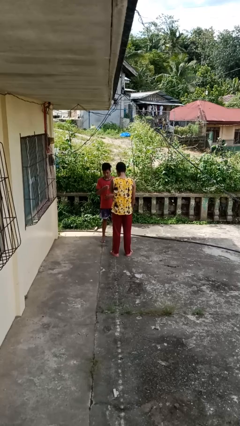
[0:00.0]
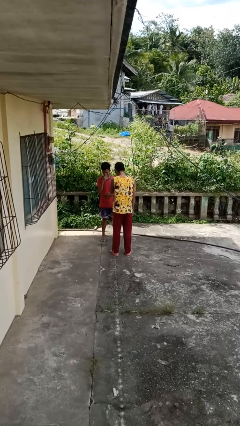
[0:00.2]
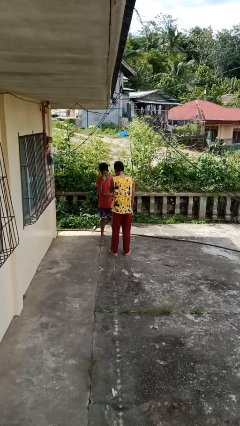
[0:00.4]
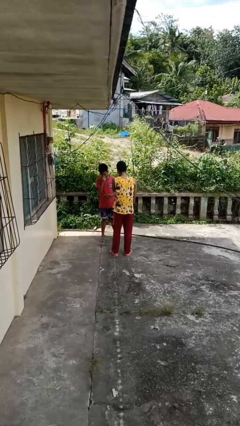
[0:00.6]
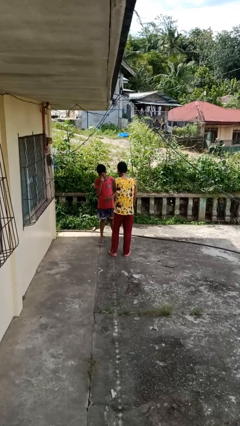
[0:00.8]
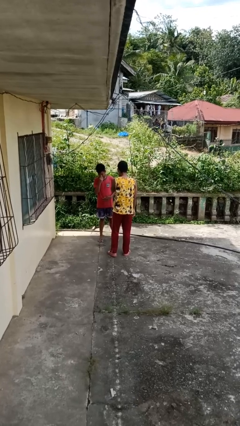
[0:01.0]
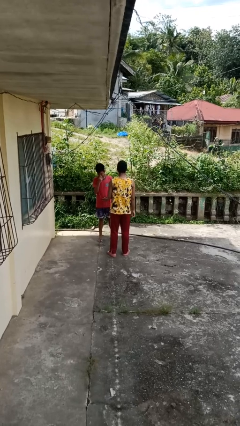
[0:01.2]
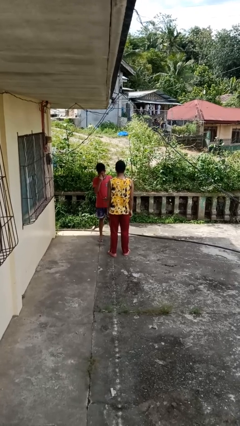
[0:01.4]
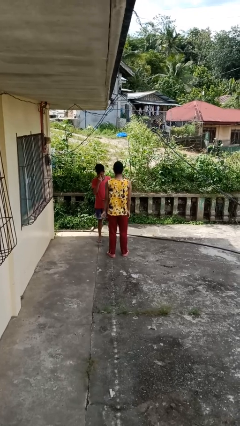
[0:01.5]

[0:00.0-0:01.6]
person laughs with person

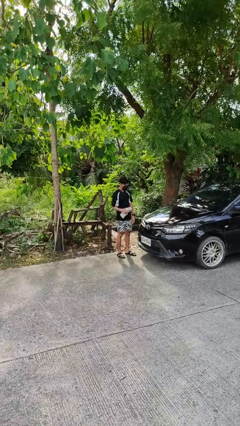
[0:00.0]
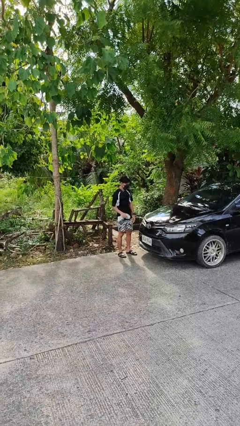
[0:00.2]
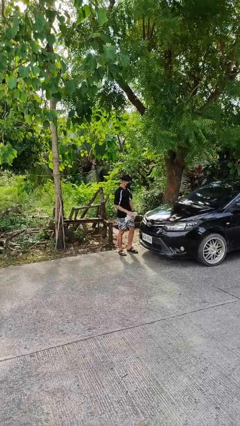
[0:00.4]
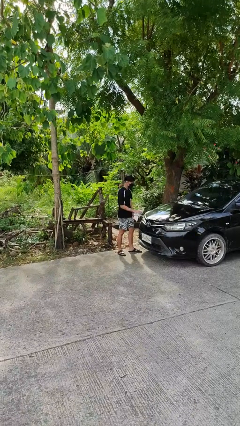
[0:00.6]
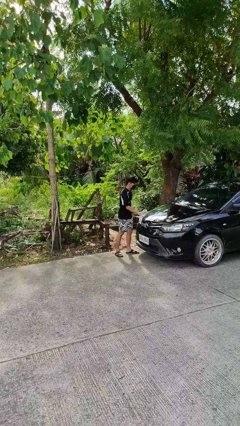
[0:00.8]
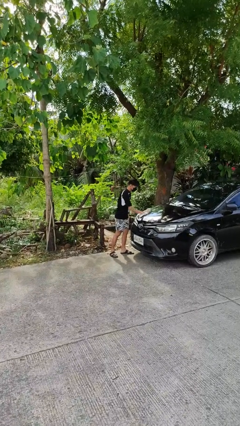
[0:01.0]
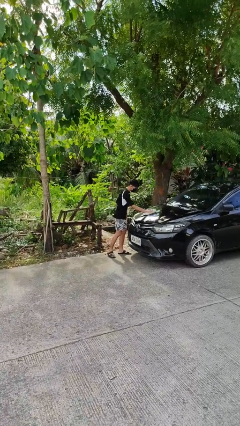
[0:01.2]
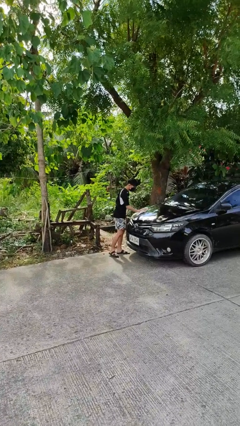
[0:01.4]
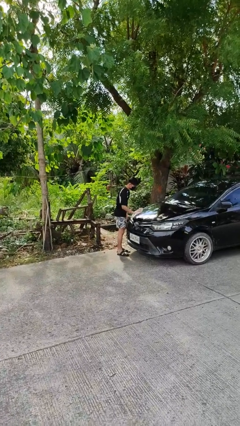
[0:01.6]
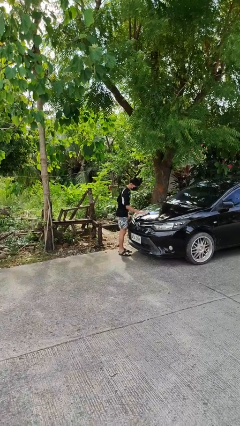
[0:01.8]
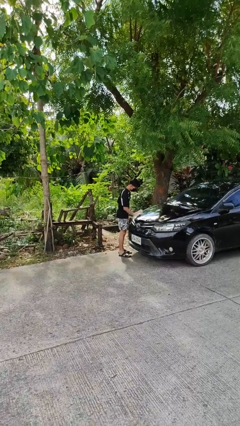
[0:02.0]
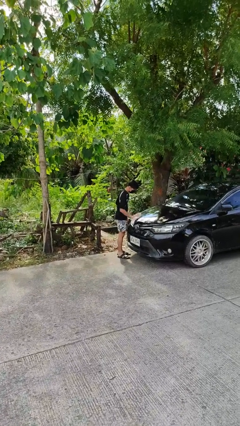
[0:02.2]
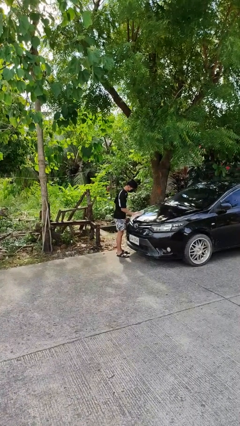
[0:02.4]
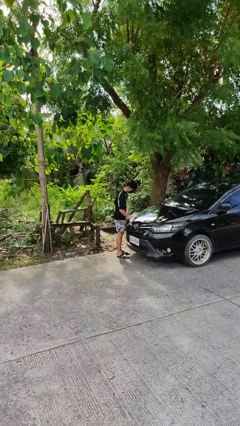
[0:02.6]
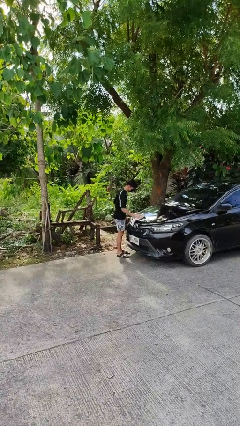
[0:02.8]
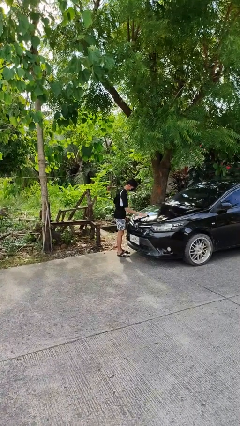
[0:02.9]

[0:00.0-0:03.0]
person polishes car with rag

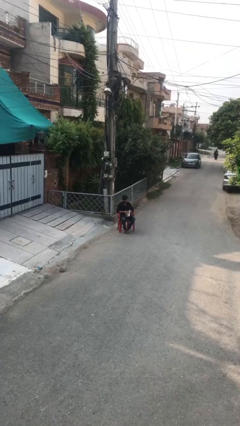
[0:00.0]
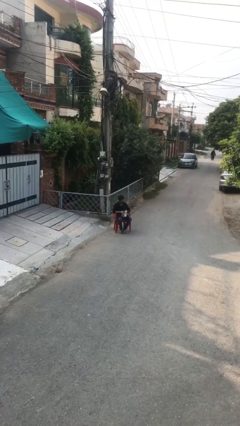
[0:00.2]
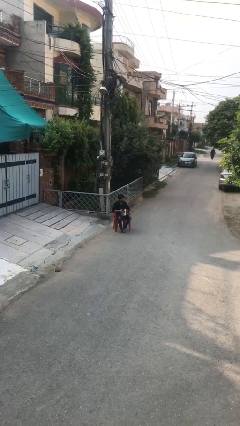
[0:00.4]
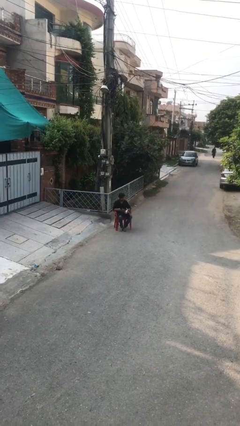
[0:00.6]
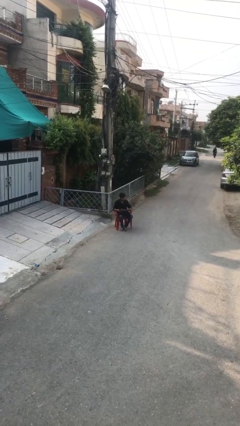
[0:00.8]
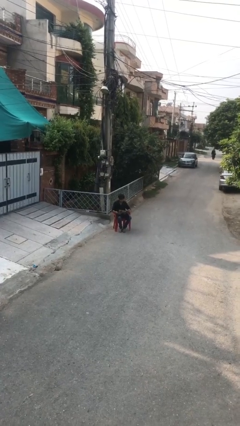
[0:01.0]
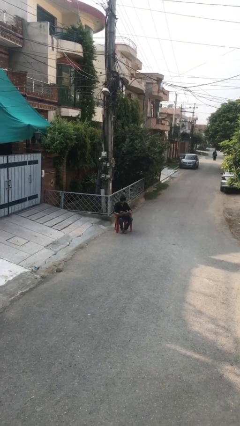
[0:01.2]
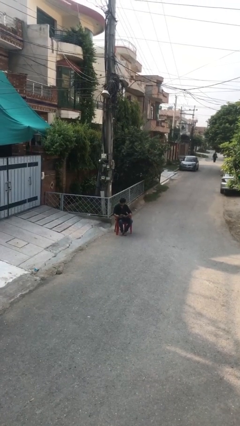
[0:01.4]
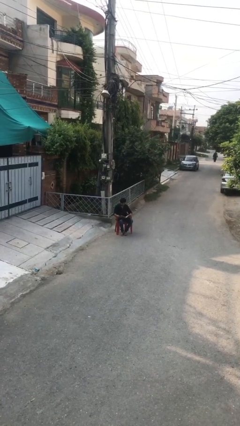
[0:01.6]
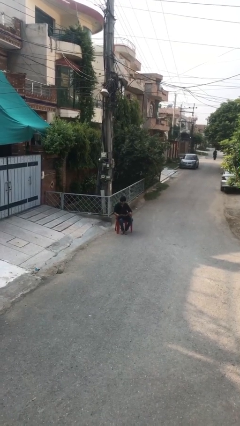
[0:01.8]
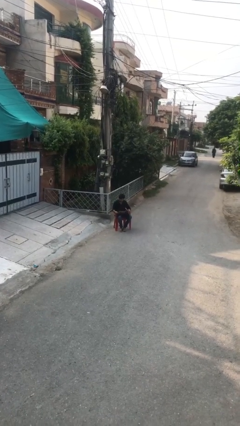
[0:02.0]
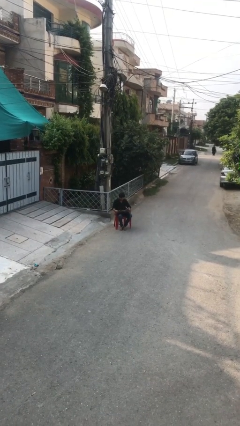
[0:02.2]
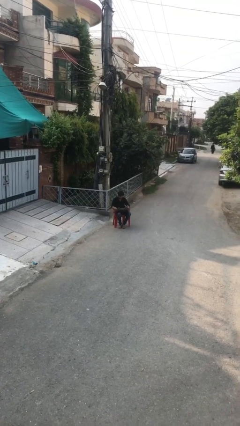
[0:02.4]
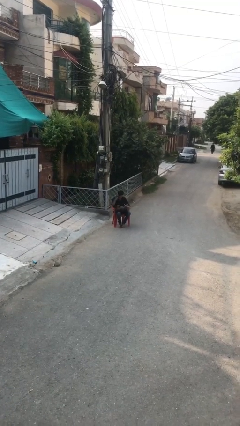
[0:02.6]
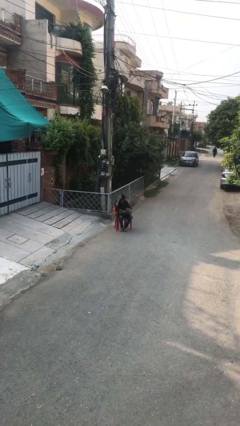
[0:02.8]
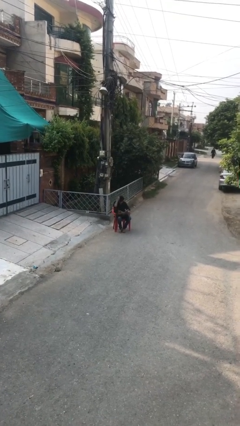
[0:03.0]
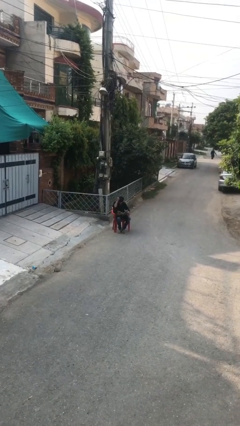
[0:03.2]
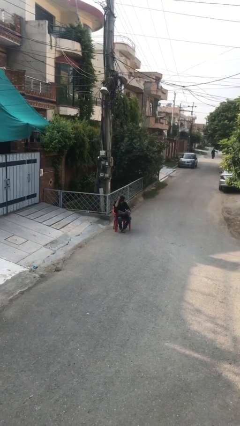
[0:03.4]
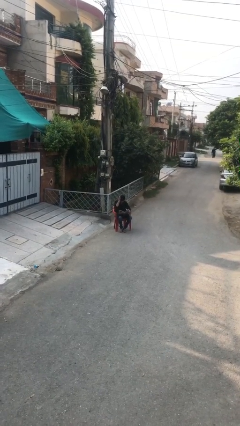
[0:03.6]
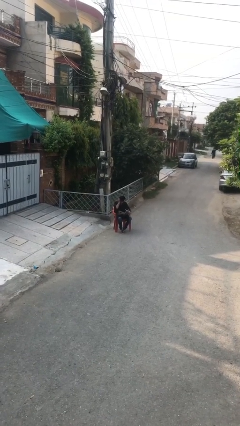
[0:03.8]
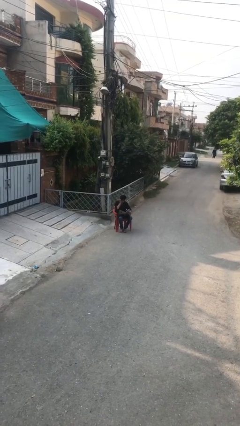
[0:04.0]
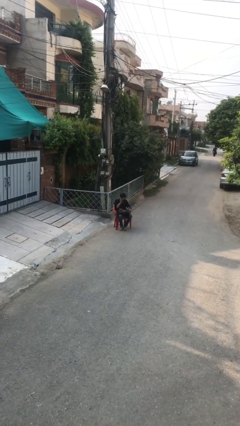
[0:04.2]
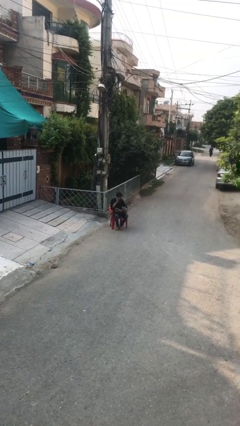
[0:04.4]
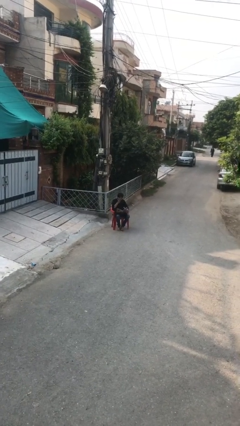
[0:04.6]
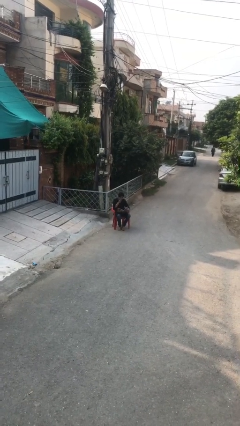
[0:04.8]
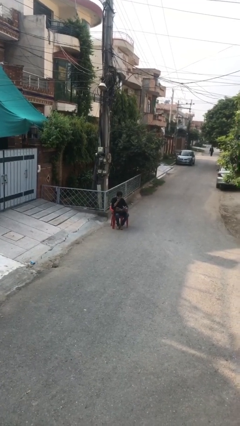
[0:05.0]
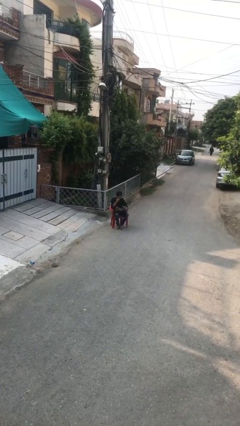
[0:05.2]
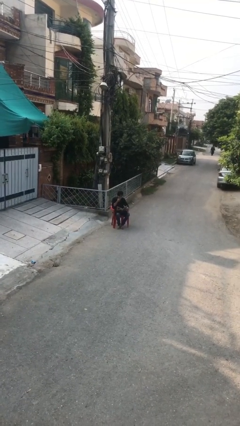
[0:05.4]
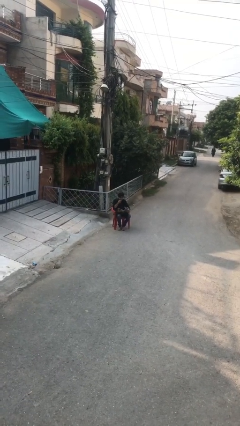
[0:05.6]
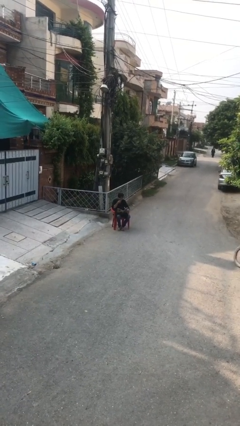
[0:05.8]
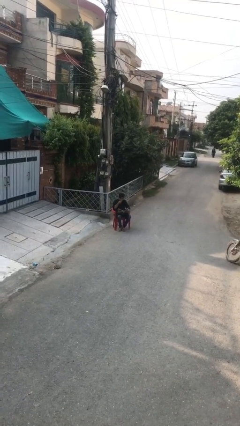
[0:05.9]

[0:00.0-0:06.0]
person reads document

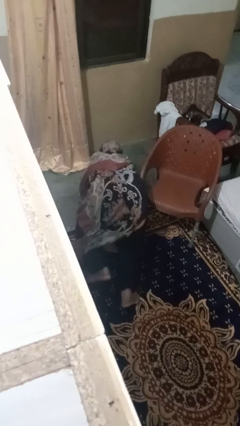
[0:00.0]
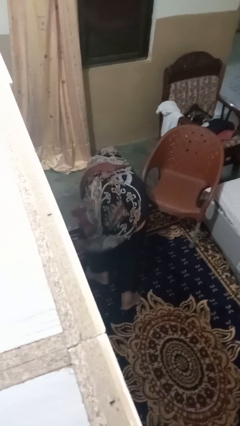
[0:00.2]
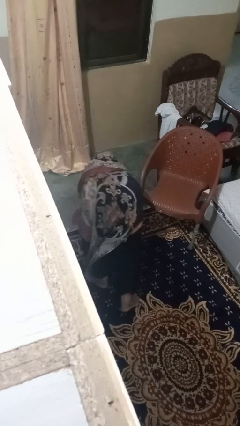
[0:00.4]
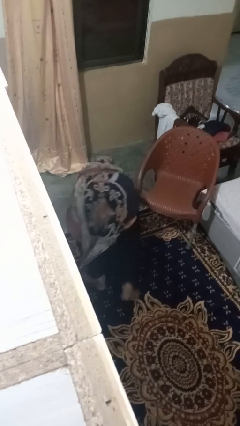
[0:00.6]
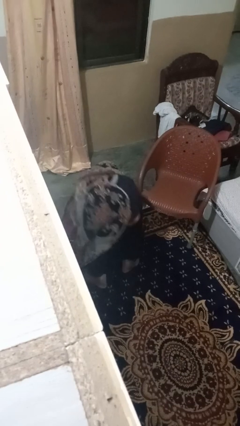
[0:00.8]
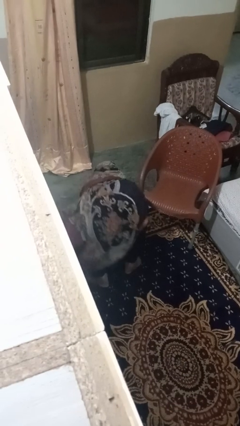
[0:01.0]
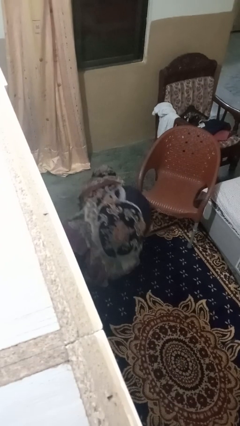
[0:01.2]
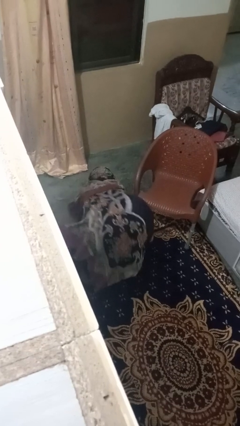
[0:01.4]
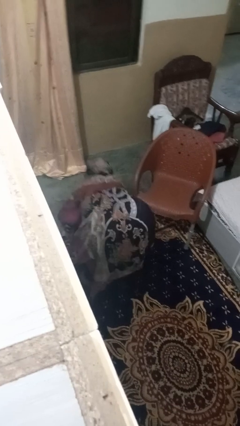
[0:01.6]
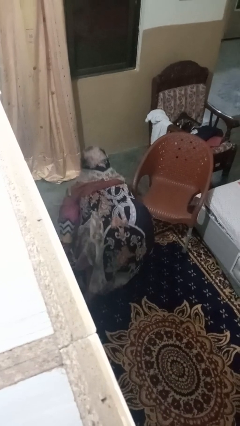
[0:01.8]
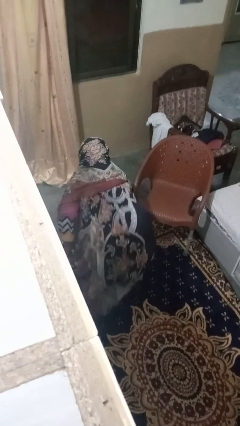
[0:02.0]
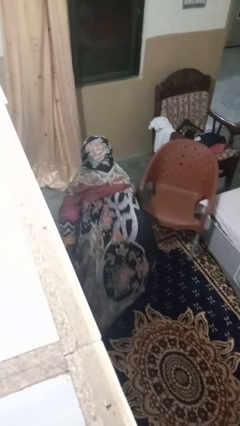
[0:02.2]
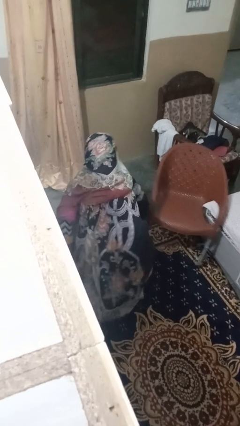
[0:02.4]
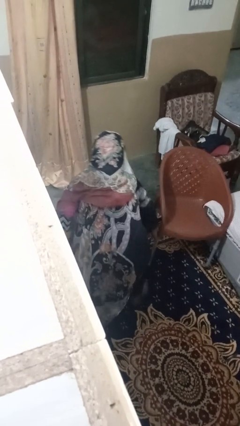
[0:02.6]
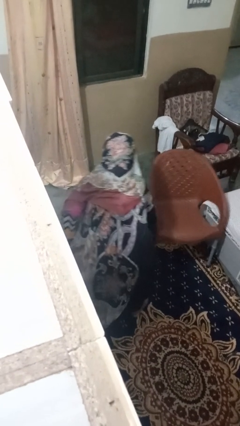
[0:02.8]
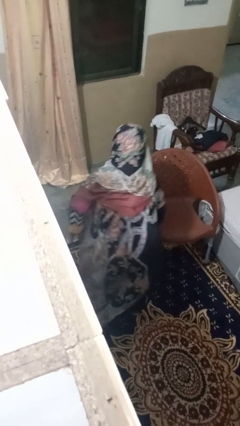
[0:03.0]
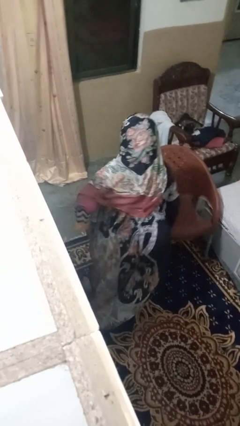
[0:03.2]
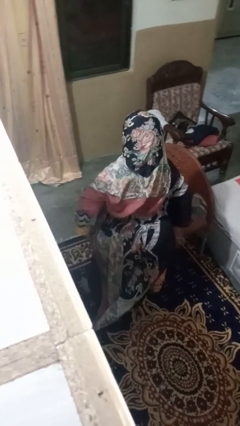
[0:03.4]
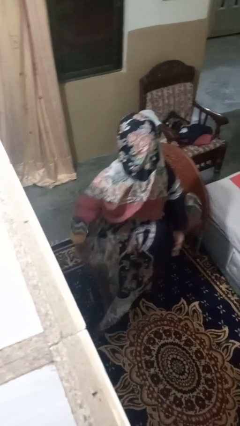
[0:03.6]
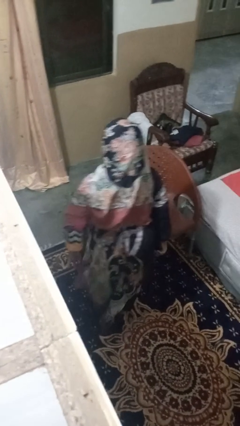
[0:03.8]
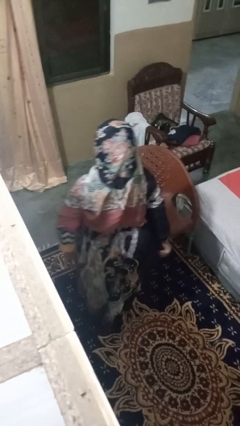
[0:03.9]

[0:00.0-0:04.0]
person stands up from floor

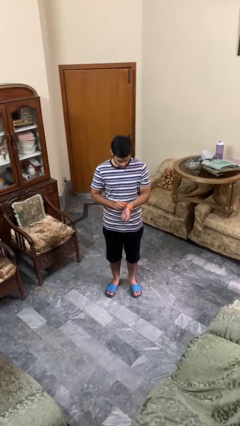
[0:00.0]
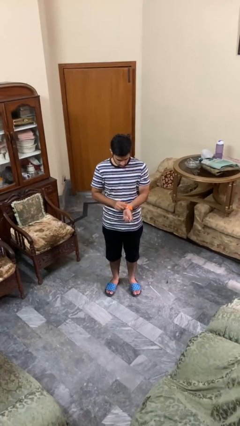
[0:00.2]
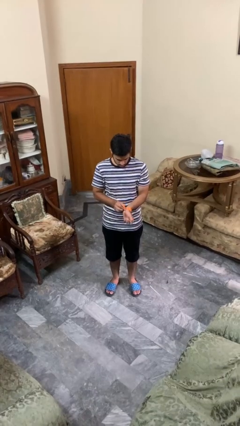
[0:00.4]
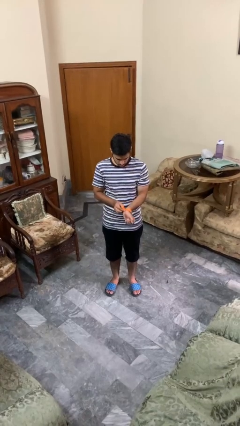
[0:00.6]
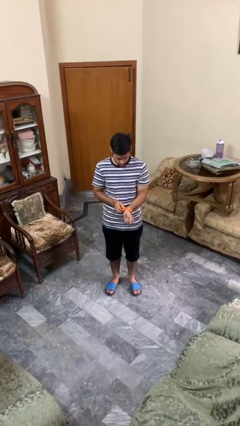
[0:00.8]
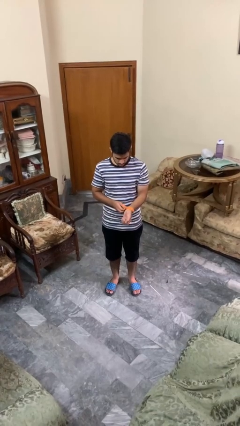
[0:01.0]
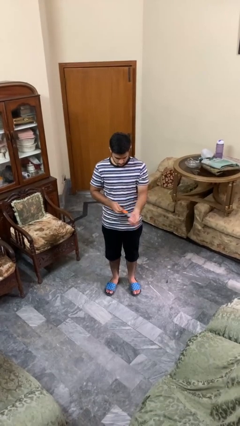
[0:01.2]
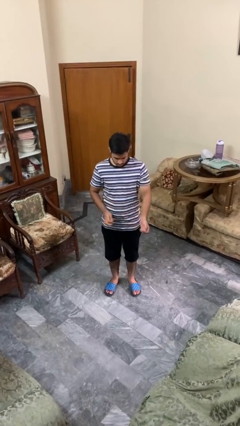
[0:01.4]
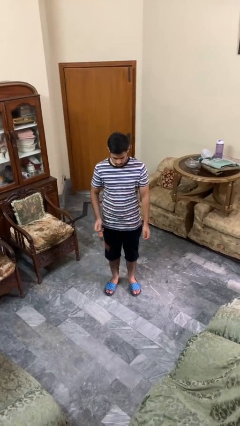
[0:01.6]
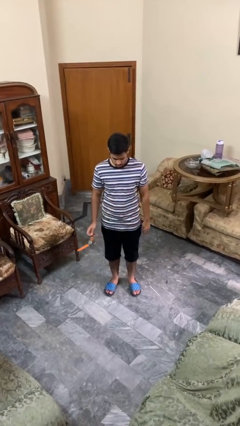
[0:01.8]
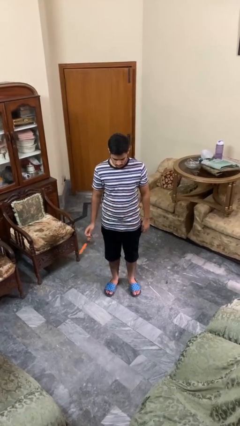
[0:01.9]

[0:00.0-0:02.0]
person takes off wristwatch

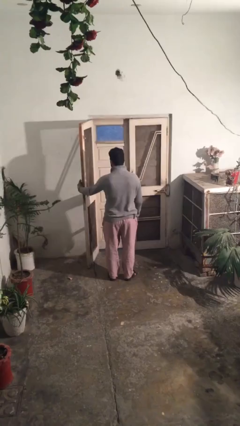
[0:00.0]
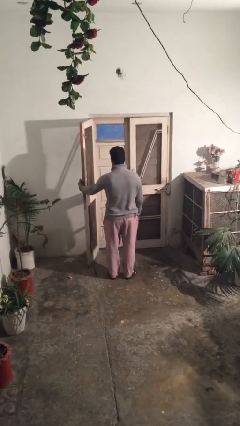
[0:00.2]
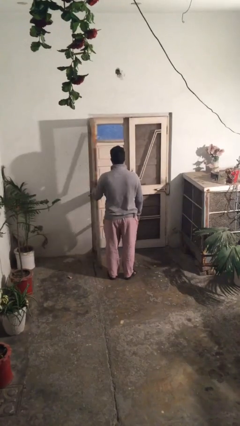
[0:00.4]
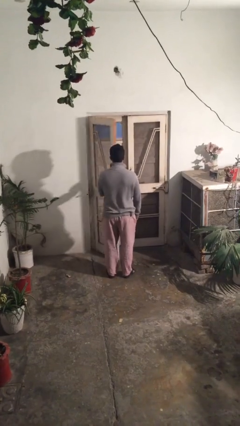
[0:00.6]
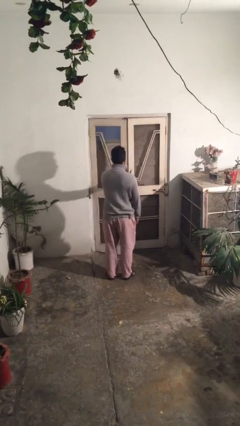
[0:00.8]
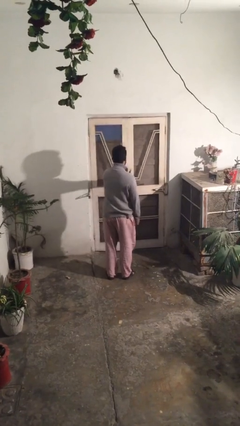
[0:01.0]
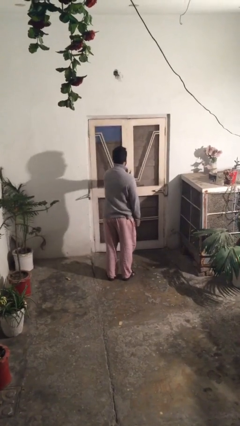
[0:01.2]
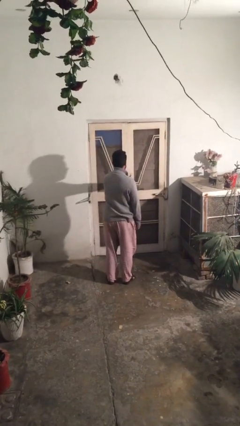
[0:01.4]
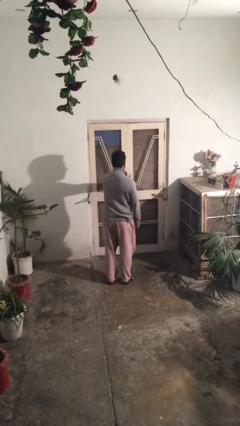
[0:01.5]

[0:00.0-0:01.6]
person closes facility door
